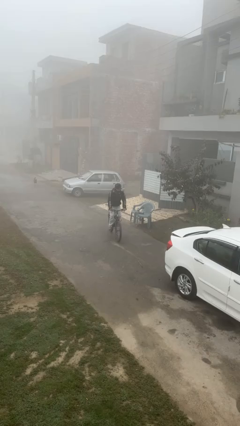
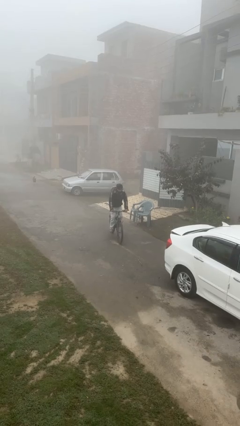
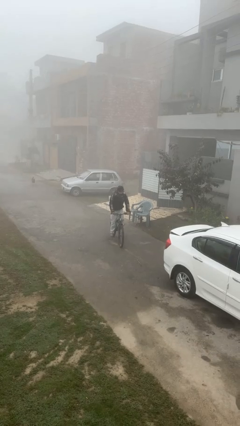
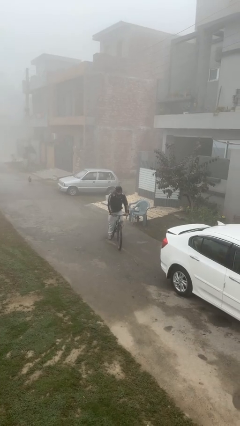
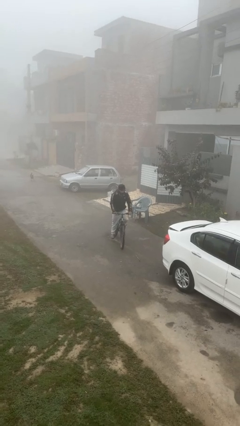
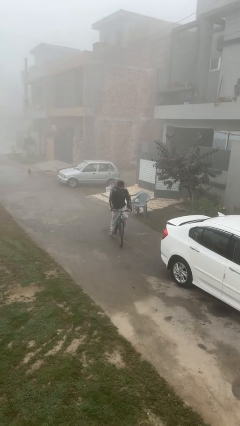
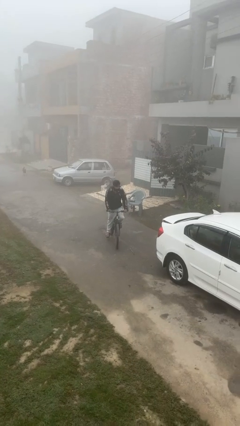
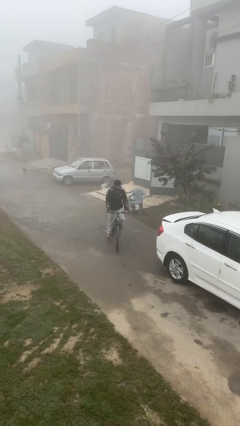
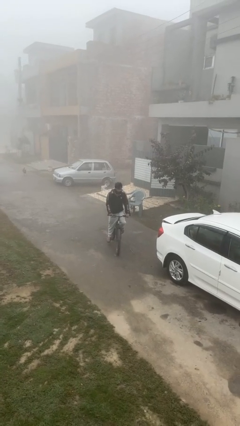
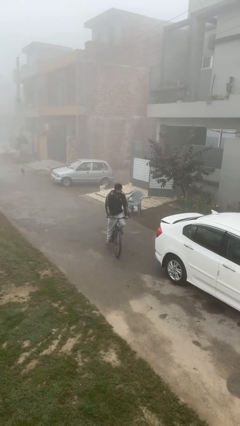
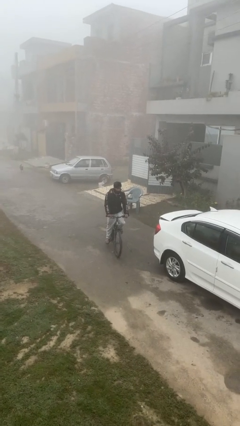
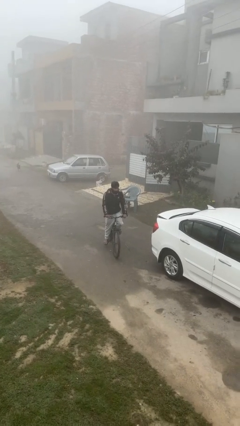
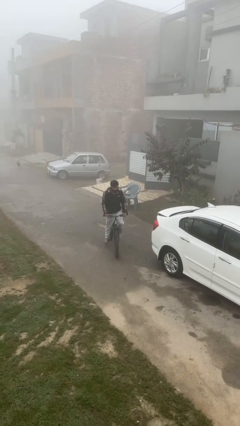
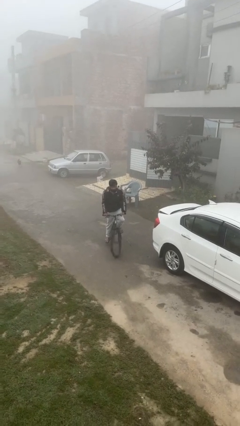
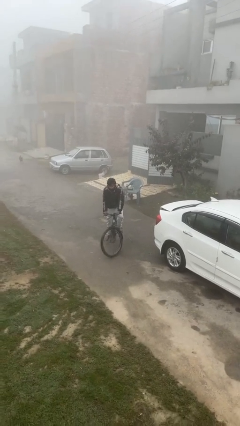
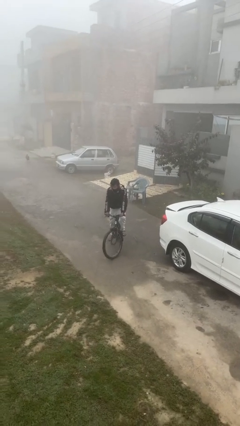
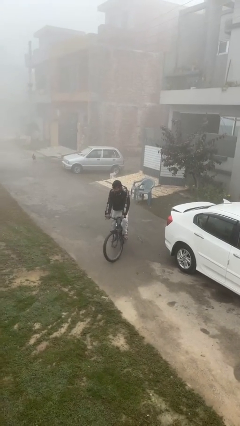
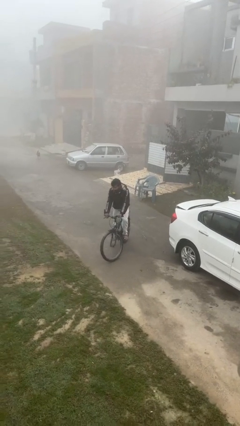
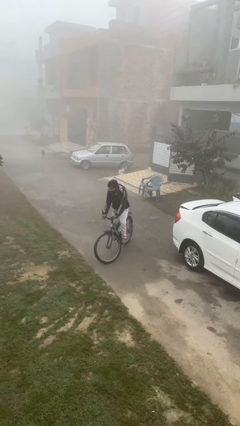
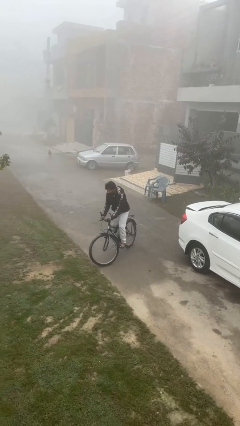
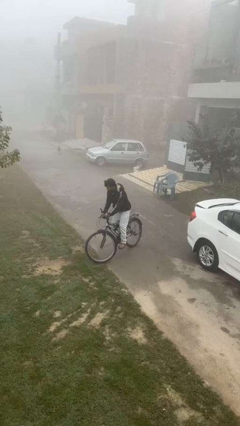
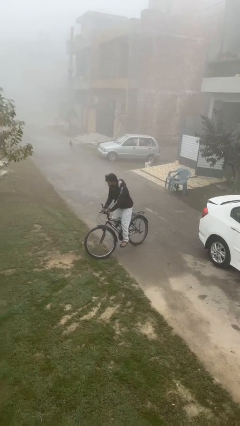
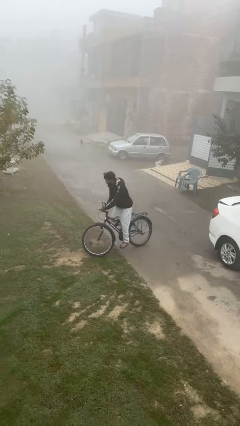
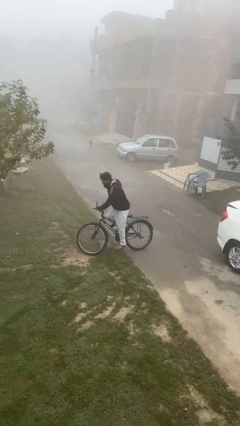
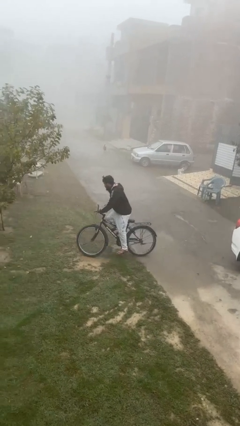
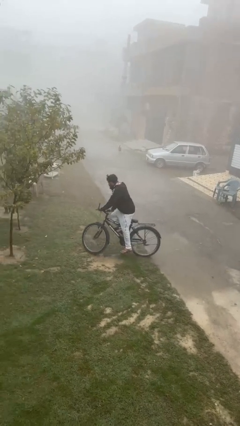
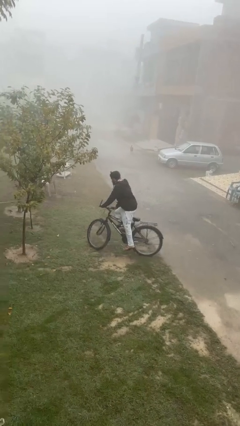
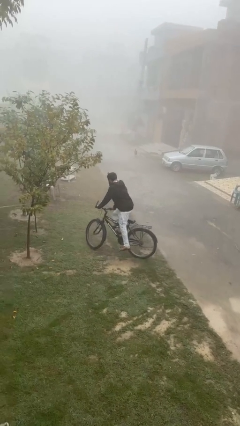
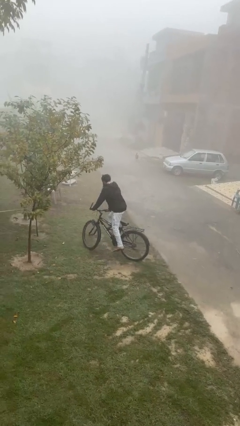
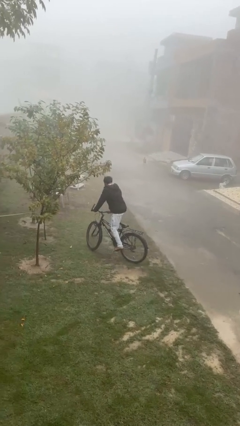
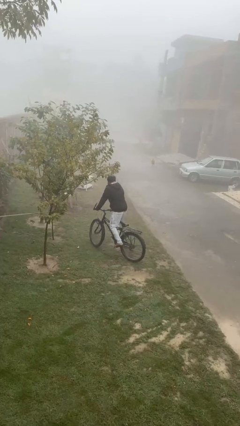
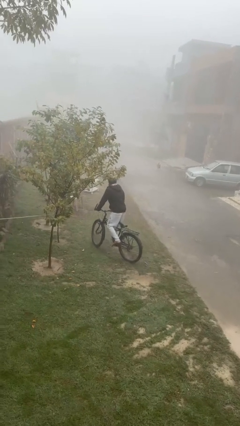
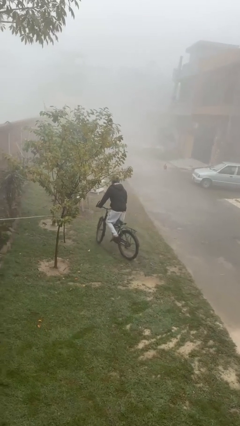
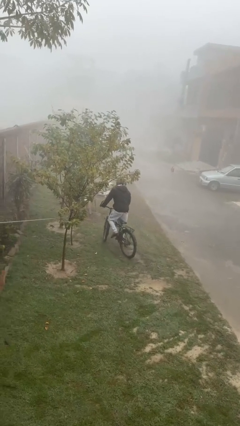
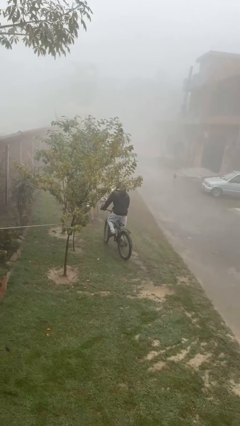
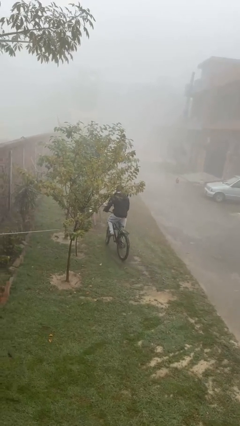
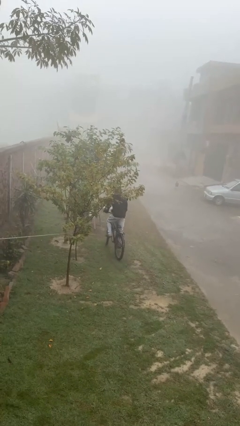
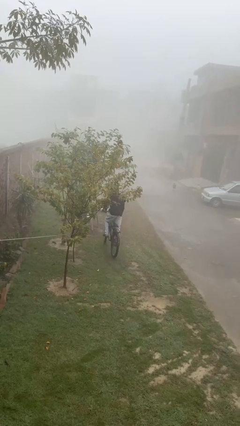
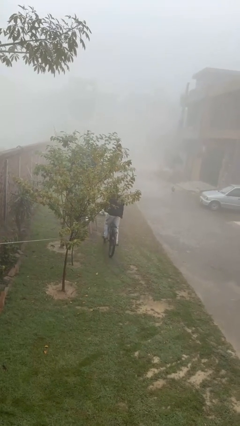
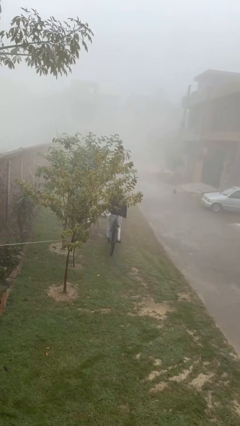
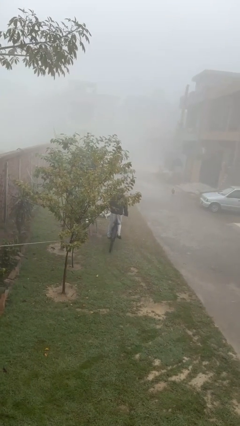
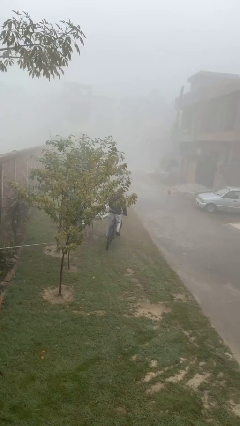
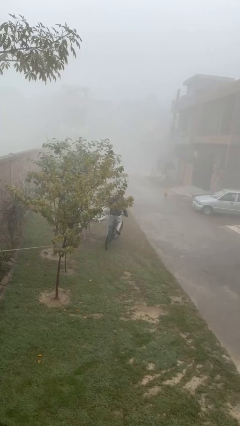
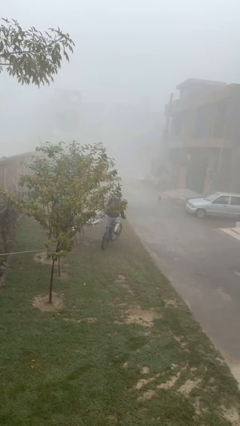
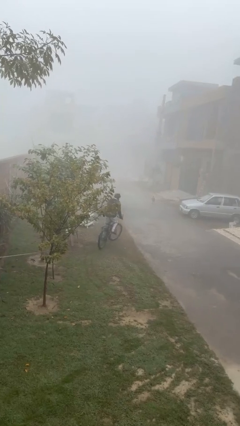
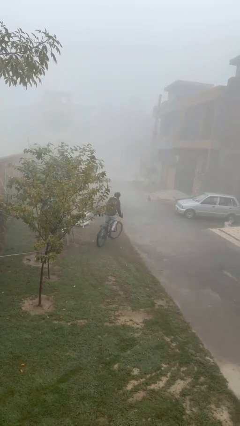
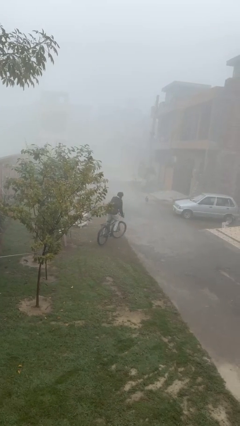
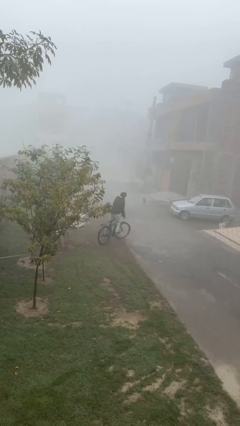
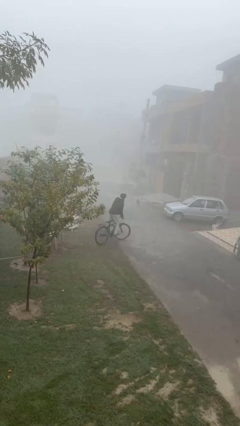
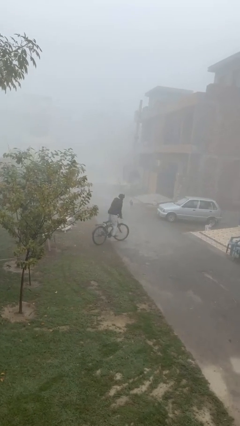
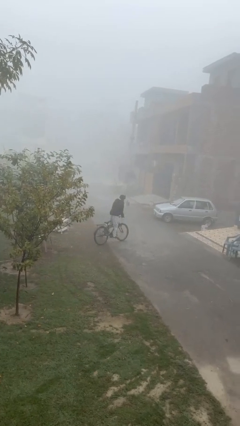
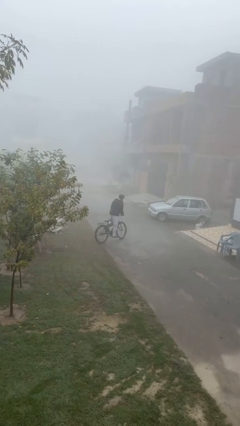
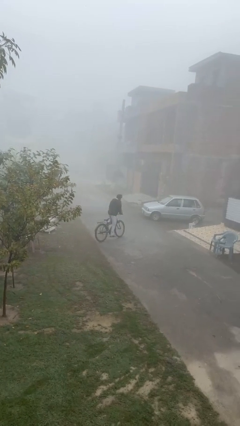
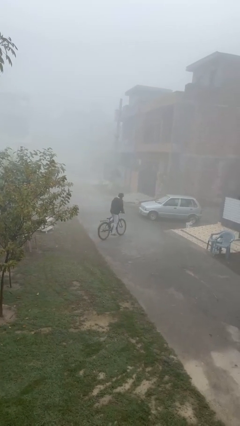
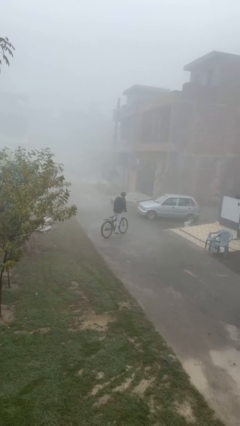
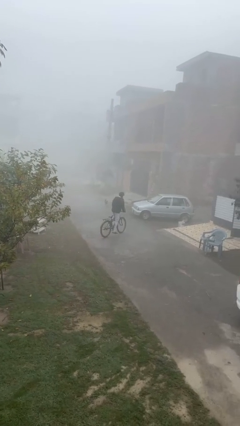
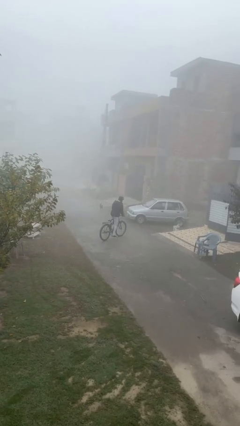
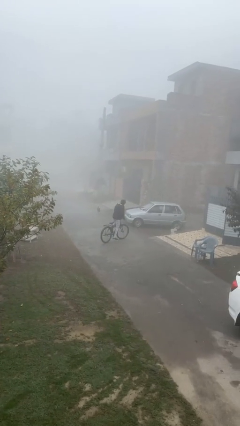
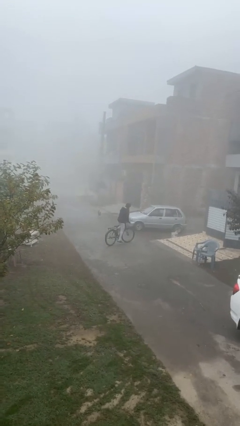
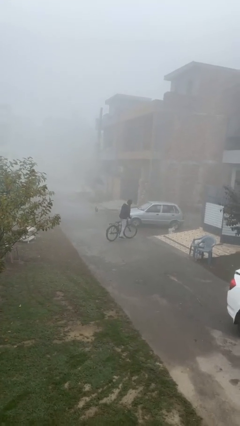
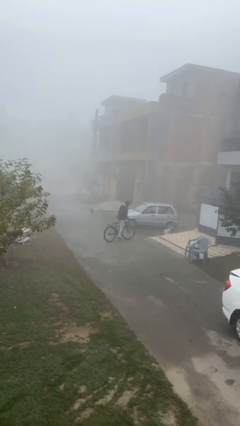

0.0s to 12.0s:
person rides bicycle

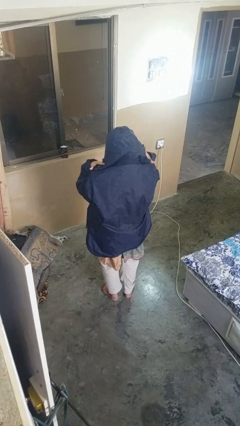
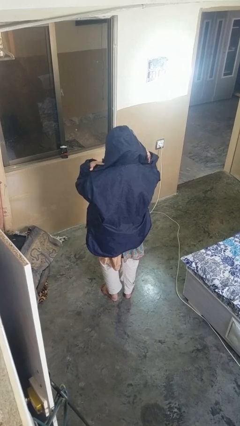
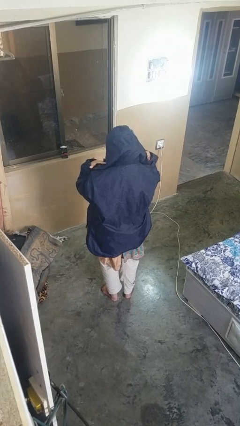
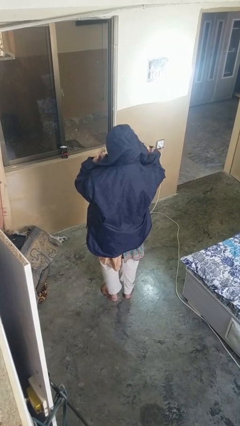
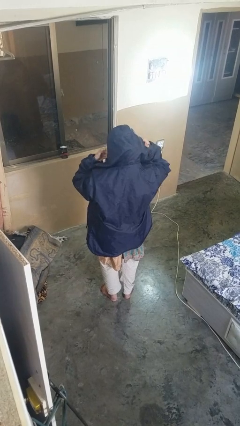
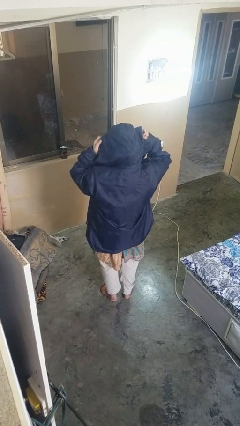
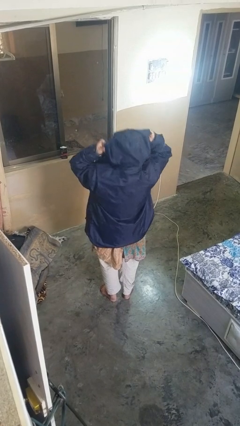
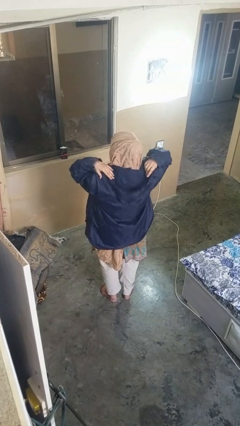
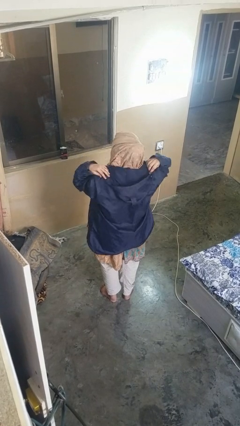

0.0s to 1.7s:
person takes off hat

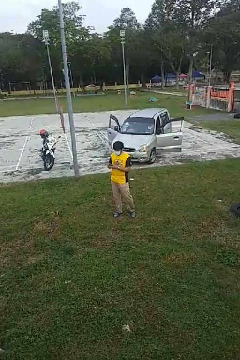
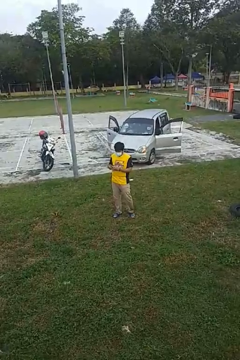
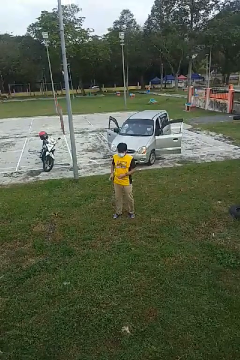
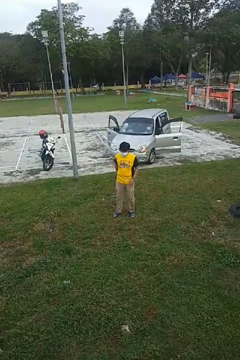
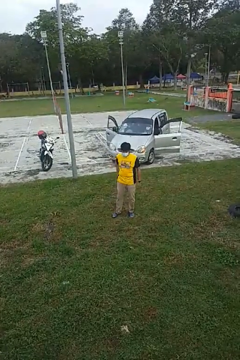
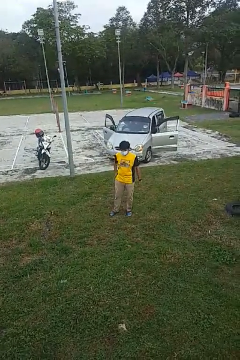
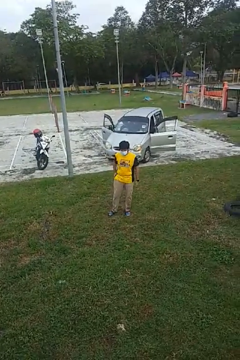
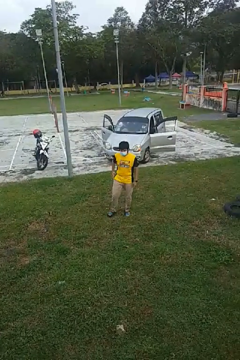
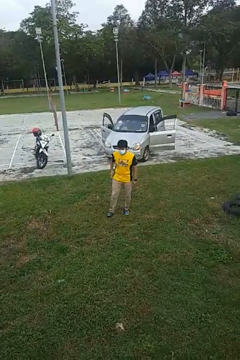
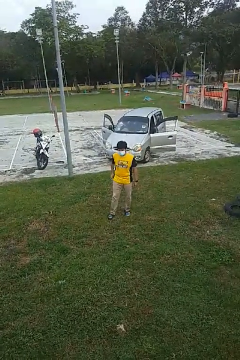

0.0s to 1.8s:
person puts phone into pocket

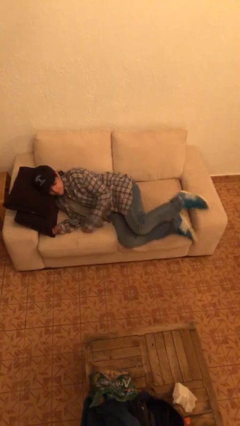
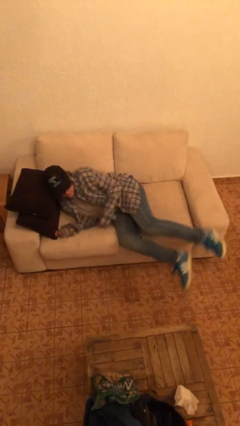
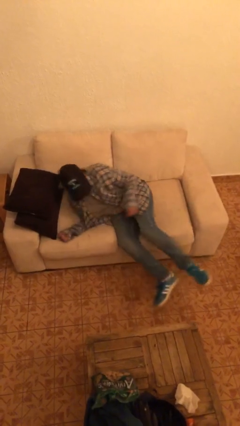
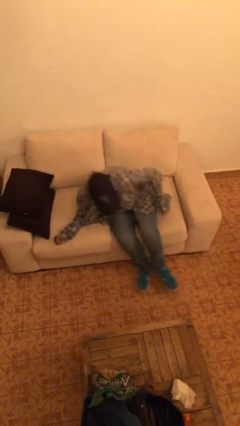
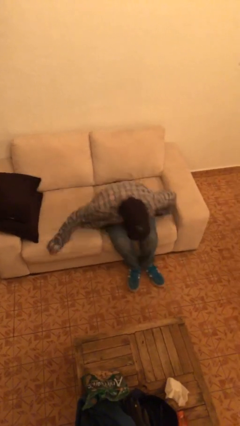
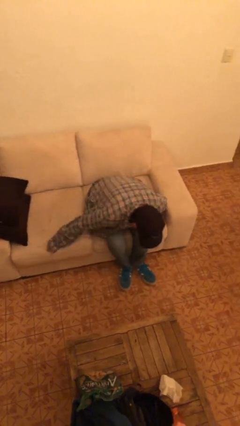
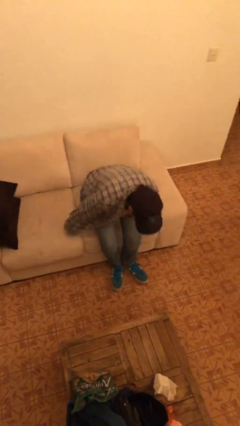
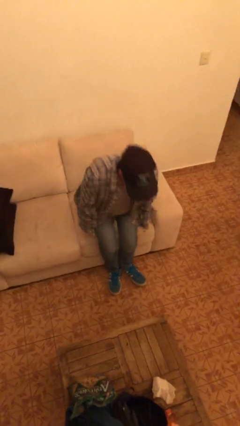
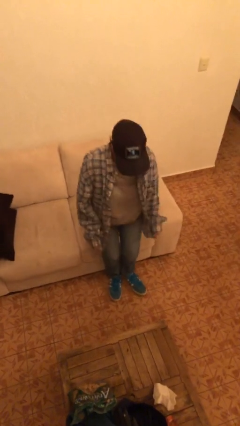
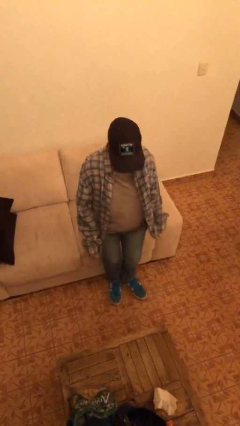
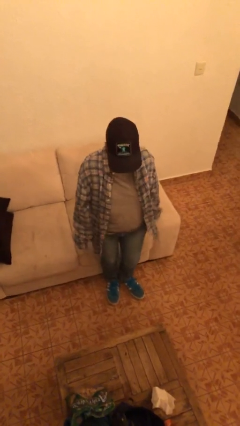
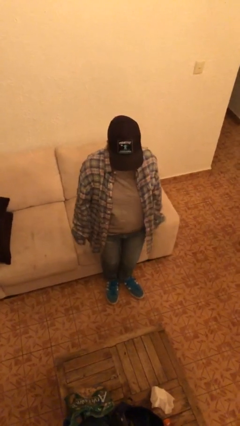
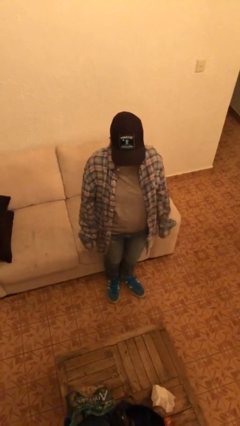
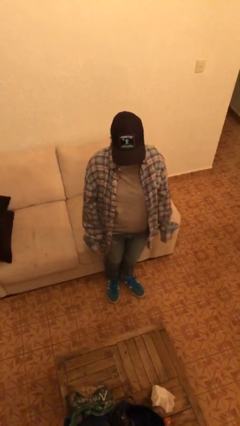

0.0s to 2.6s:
person stands up
